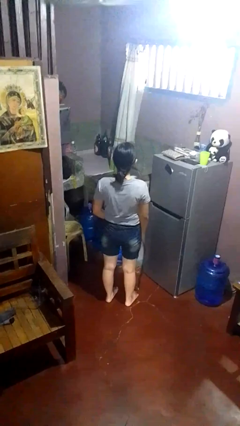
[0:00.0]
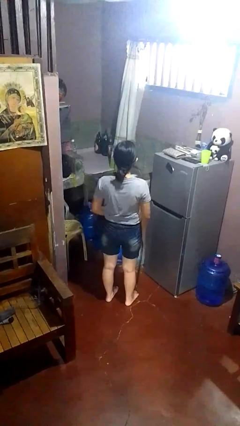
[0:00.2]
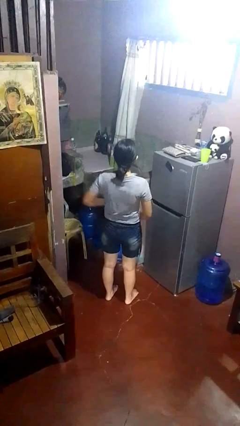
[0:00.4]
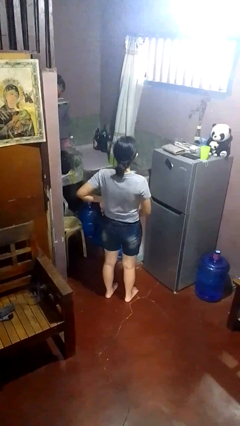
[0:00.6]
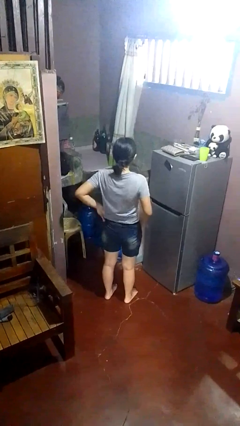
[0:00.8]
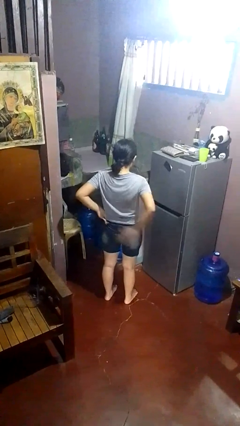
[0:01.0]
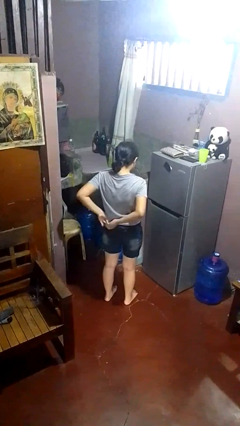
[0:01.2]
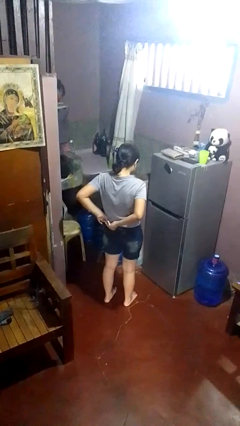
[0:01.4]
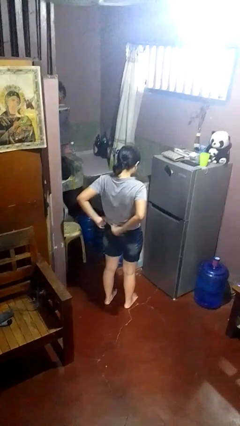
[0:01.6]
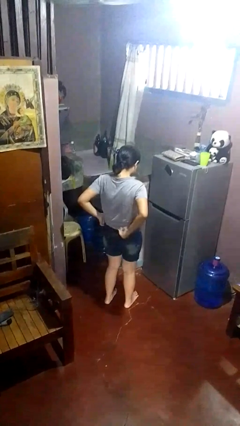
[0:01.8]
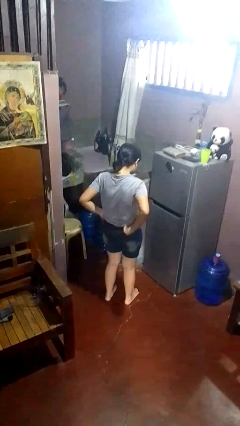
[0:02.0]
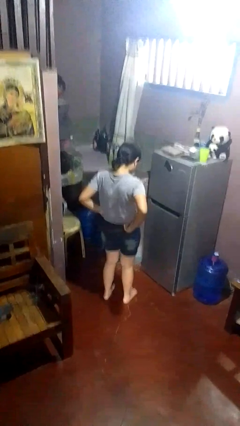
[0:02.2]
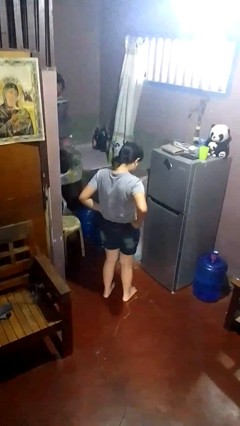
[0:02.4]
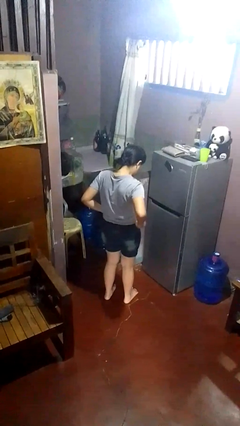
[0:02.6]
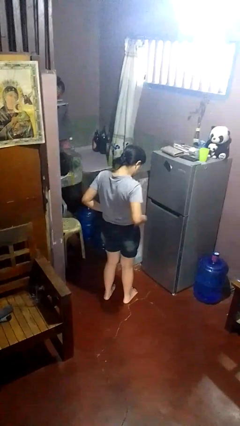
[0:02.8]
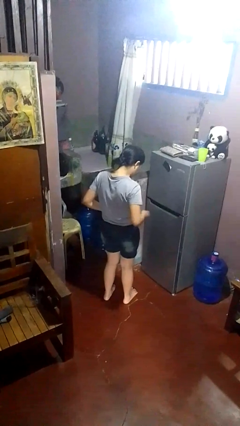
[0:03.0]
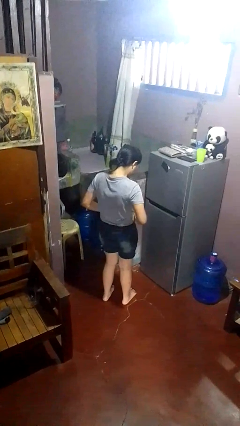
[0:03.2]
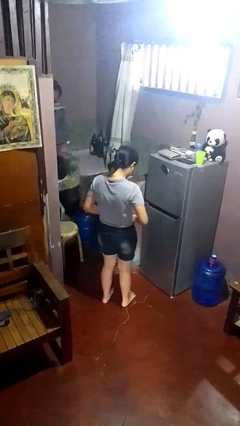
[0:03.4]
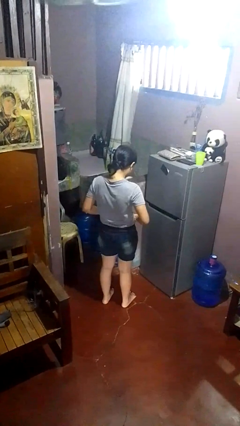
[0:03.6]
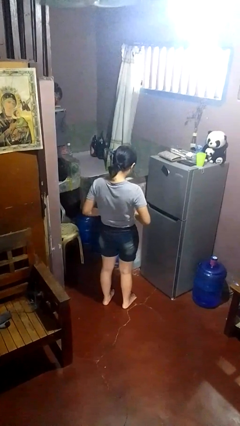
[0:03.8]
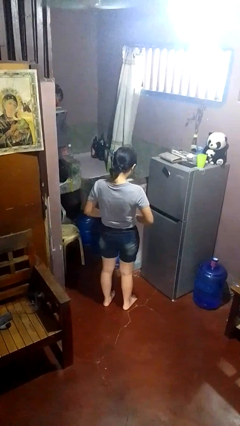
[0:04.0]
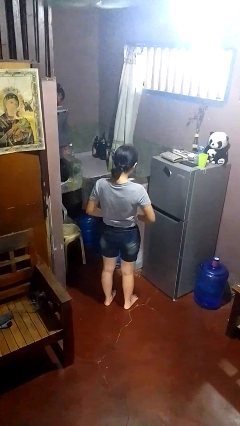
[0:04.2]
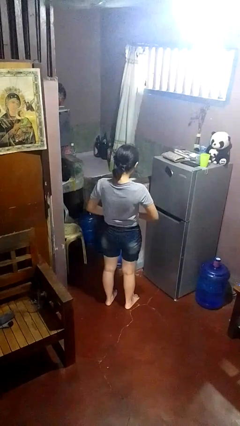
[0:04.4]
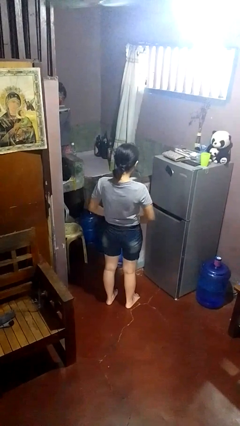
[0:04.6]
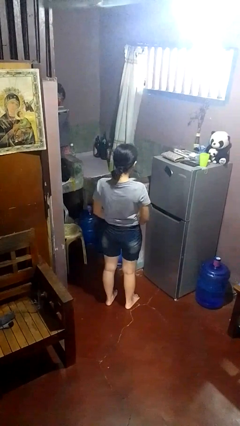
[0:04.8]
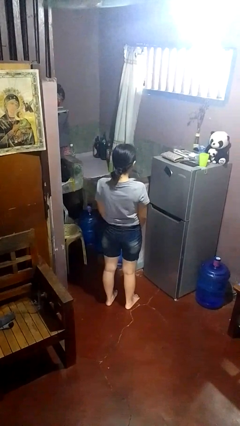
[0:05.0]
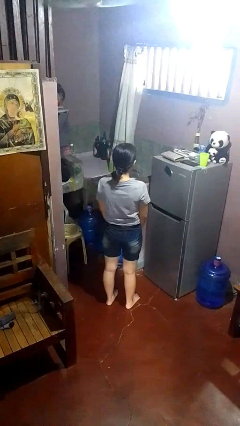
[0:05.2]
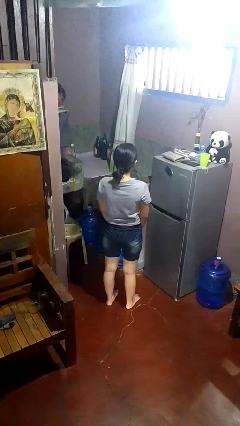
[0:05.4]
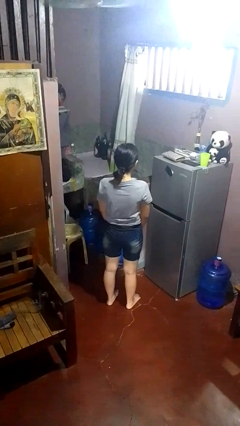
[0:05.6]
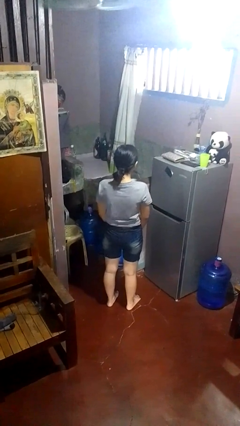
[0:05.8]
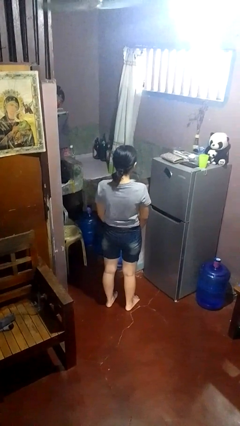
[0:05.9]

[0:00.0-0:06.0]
person puts on belt

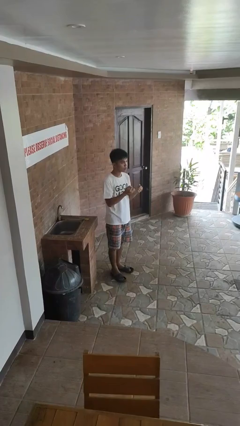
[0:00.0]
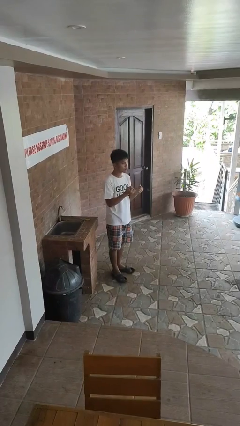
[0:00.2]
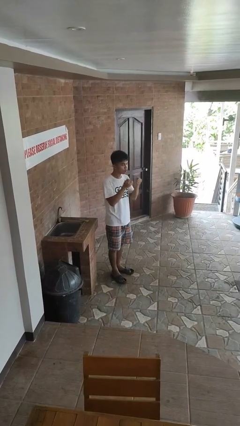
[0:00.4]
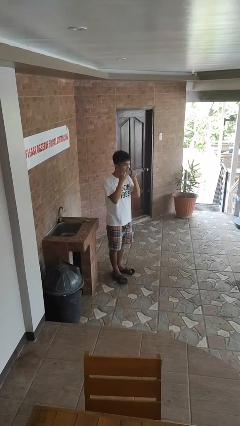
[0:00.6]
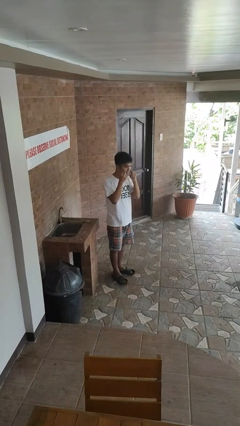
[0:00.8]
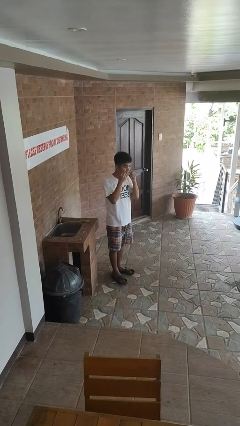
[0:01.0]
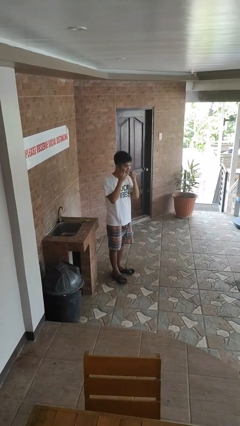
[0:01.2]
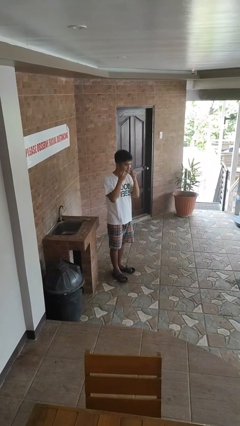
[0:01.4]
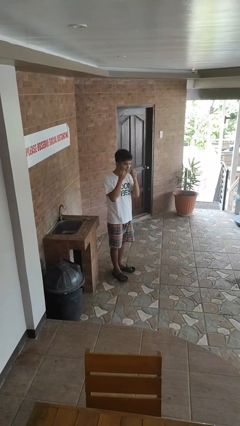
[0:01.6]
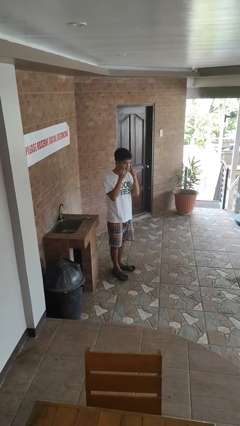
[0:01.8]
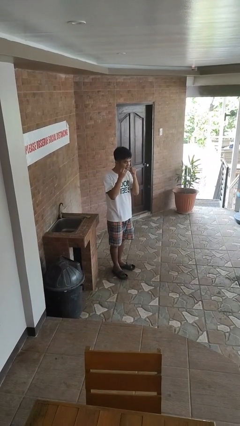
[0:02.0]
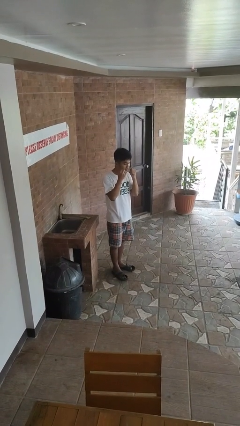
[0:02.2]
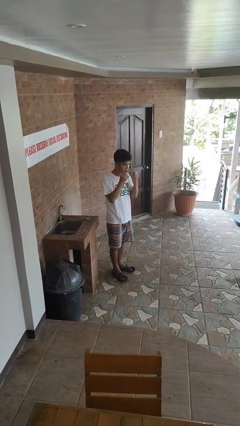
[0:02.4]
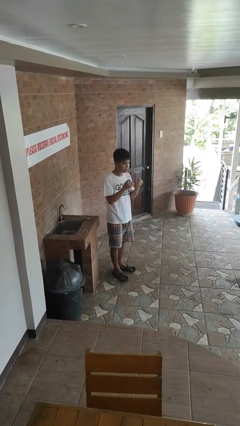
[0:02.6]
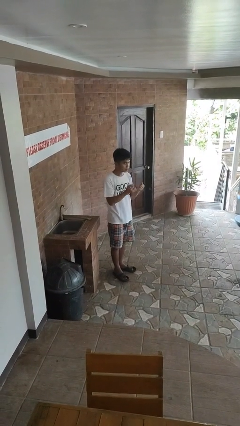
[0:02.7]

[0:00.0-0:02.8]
person flosses

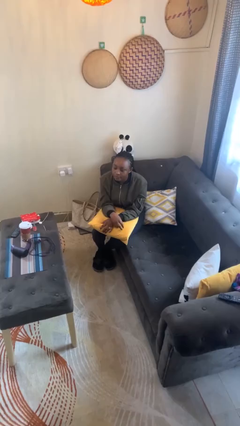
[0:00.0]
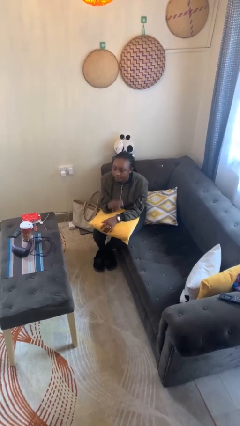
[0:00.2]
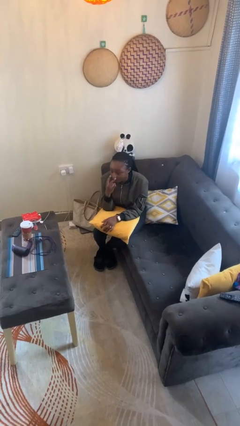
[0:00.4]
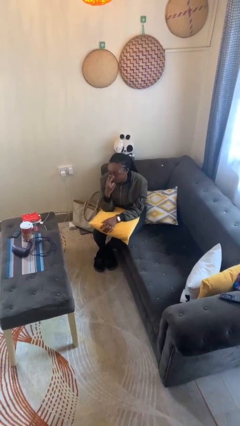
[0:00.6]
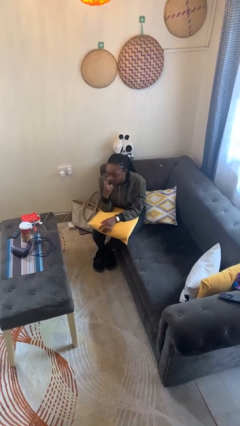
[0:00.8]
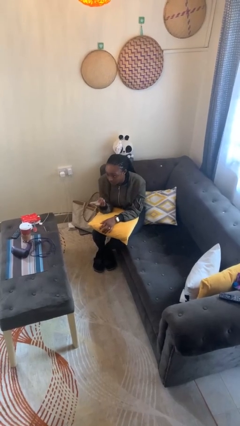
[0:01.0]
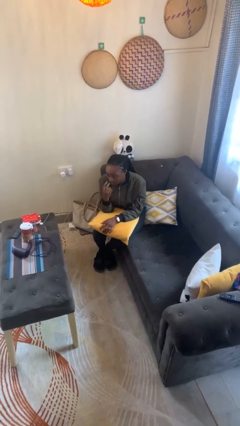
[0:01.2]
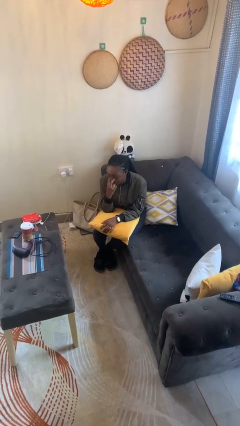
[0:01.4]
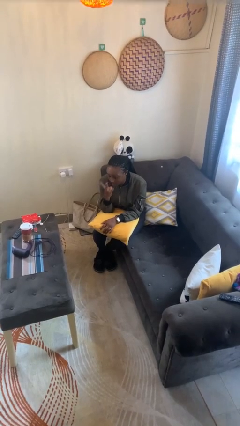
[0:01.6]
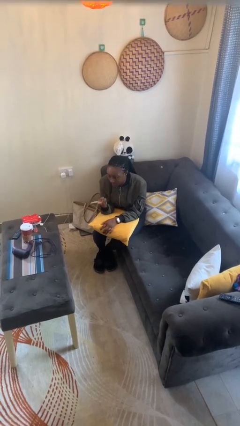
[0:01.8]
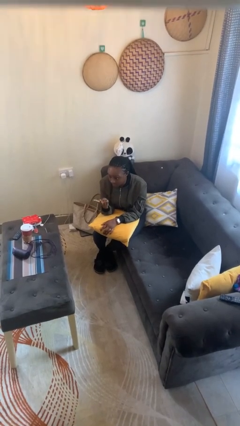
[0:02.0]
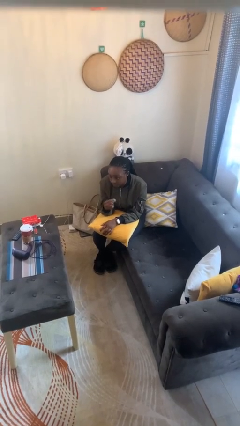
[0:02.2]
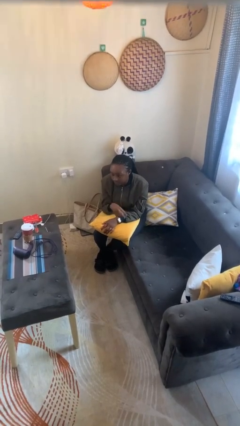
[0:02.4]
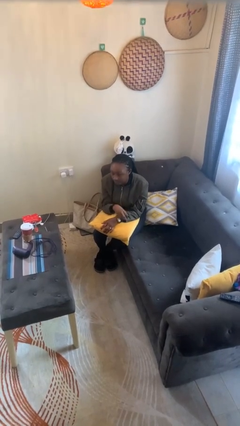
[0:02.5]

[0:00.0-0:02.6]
person gestures watch closely

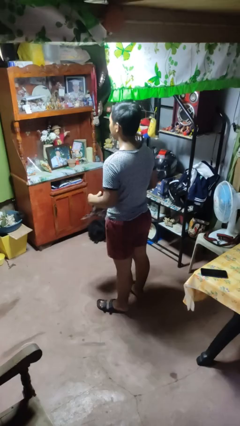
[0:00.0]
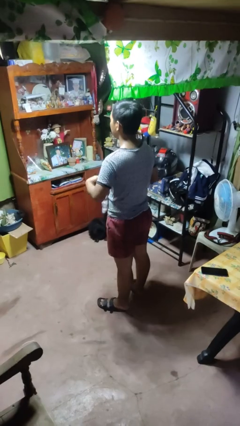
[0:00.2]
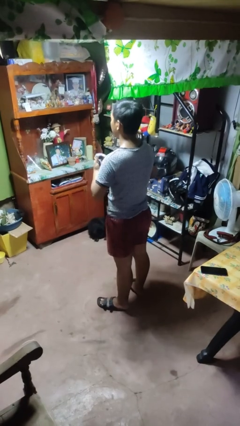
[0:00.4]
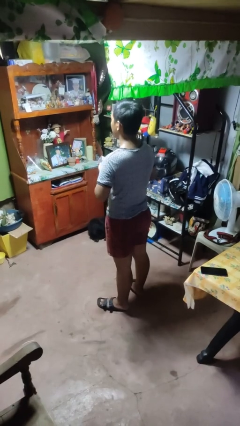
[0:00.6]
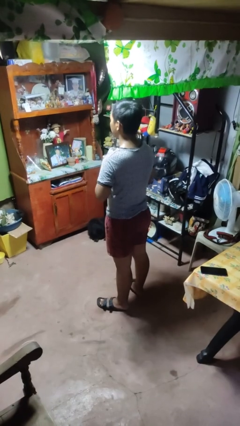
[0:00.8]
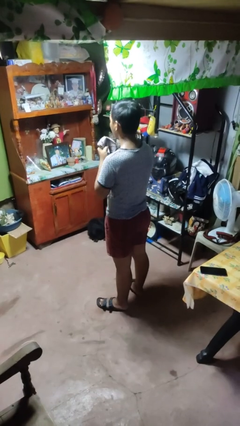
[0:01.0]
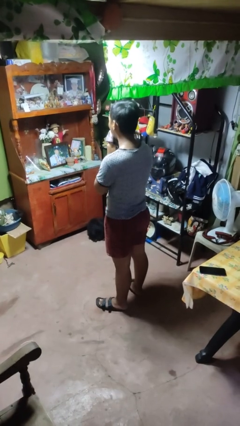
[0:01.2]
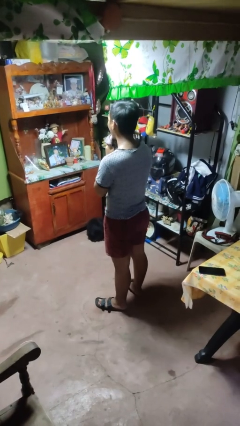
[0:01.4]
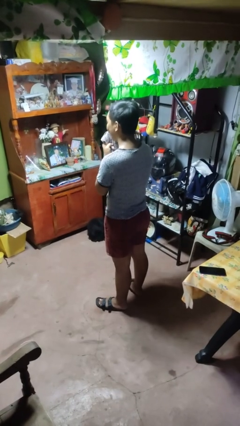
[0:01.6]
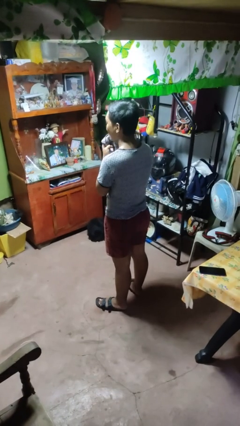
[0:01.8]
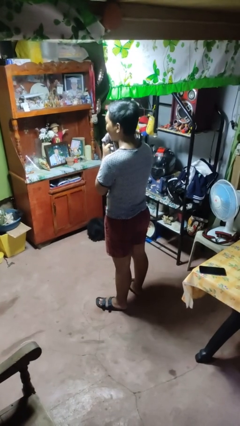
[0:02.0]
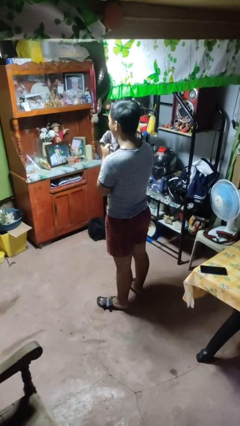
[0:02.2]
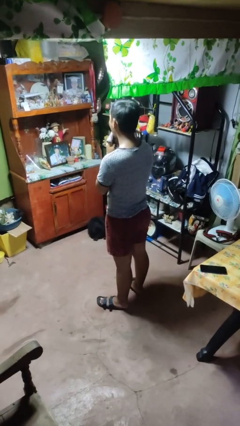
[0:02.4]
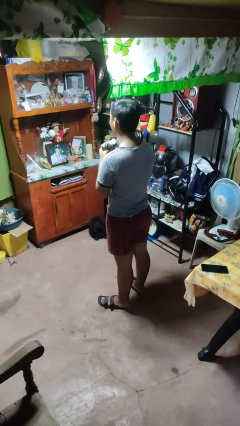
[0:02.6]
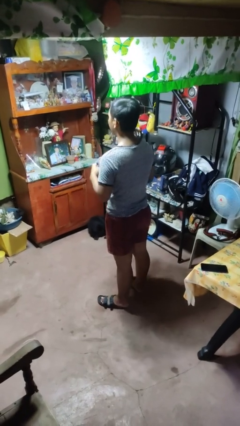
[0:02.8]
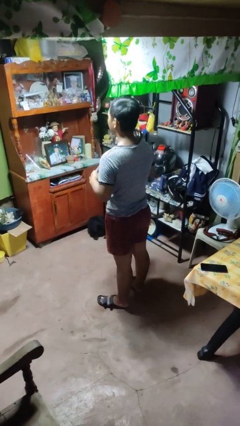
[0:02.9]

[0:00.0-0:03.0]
person wipes mouth with napkin

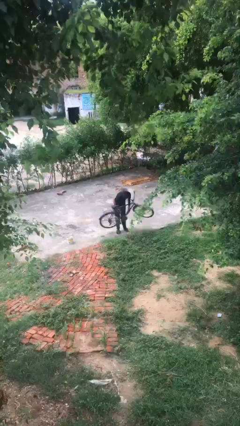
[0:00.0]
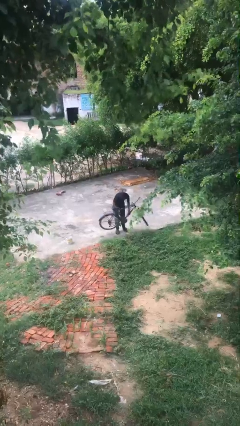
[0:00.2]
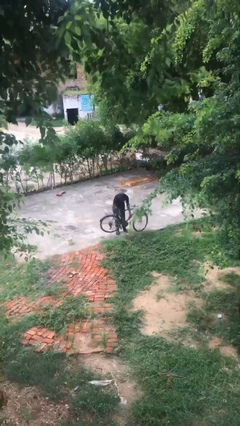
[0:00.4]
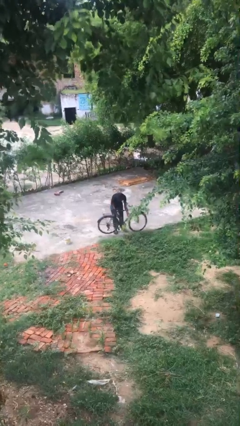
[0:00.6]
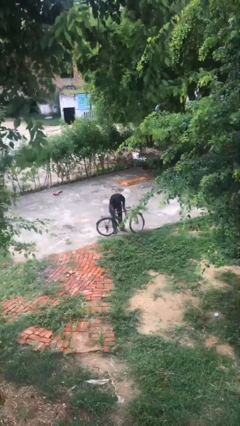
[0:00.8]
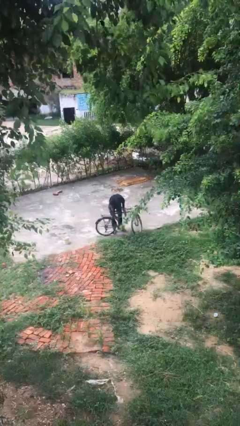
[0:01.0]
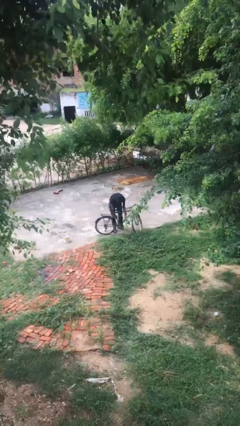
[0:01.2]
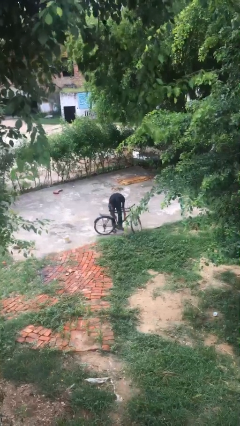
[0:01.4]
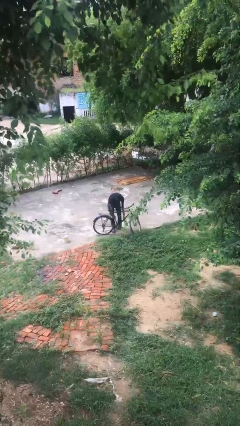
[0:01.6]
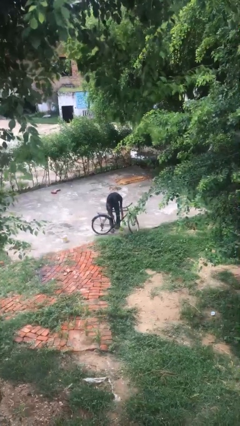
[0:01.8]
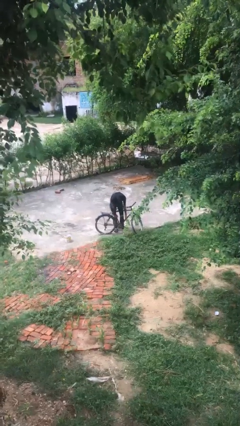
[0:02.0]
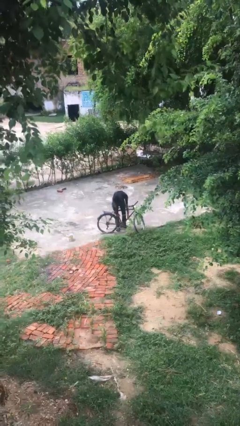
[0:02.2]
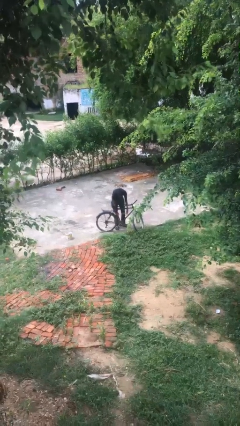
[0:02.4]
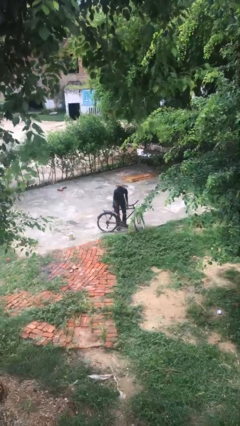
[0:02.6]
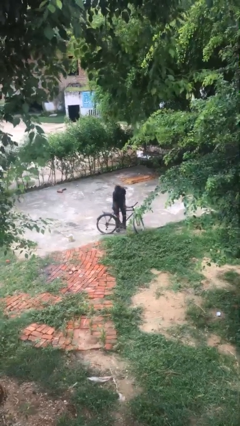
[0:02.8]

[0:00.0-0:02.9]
person puts down object on floor
